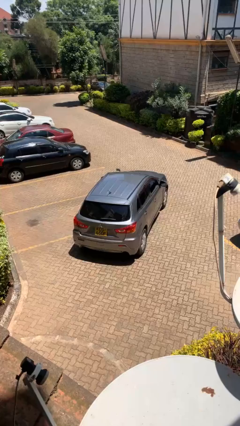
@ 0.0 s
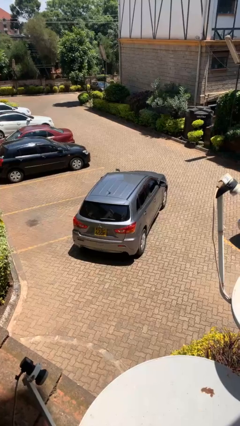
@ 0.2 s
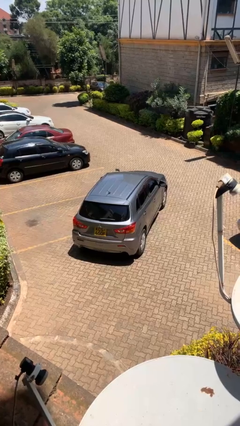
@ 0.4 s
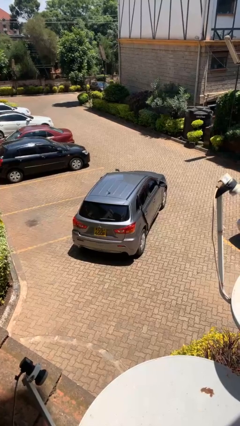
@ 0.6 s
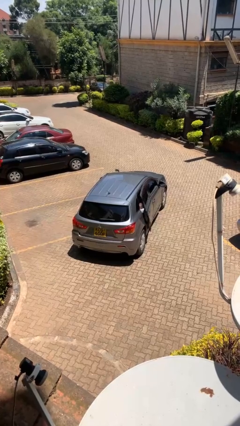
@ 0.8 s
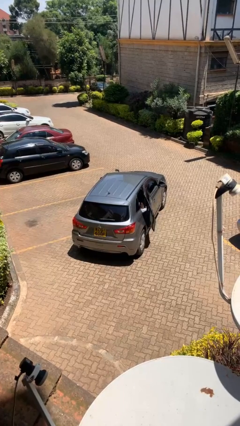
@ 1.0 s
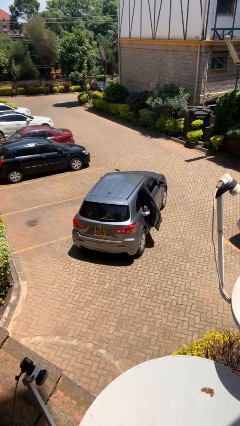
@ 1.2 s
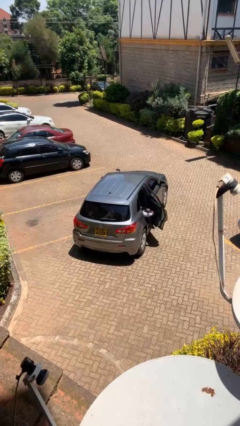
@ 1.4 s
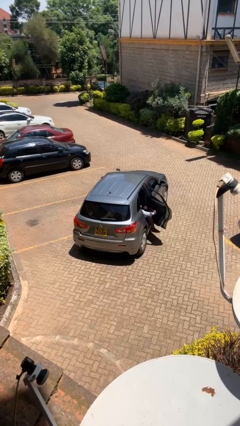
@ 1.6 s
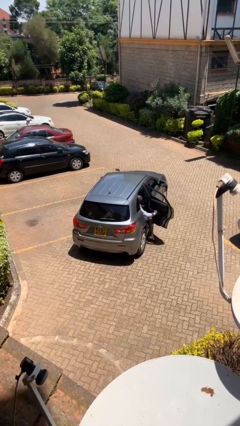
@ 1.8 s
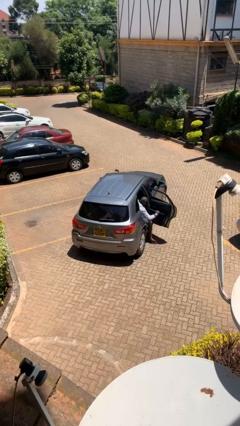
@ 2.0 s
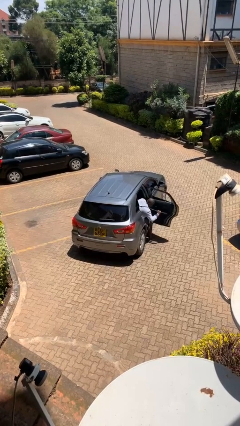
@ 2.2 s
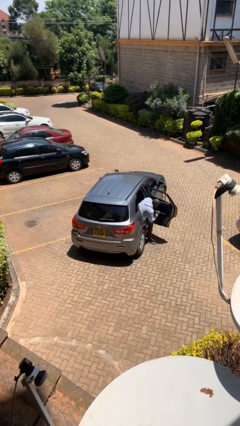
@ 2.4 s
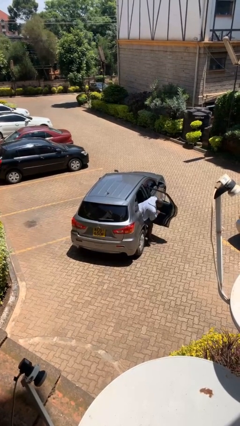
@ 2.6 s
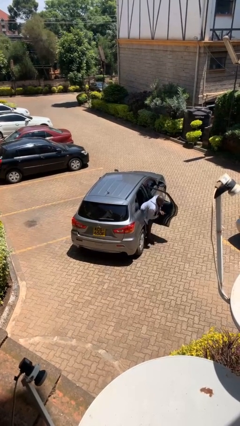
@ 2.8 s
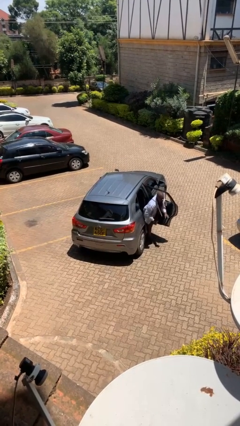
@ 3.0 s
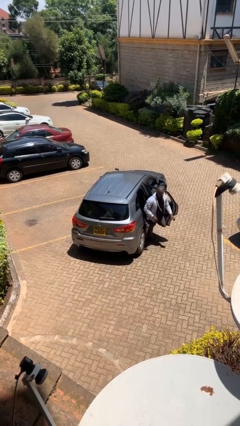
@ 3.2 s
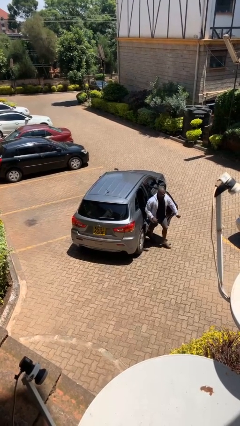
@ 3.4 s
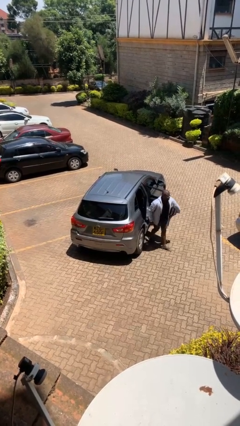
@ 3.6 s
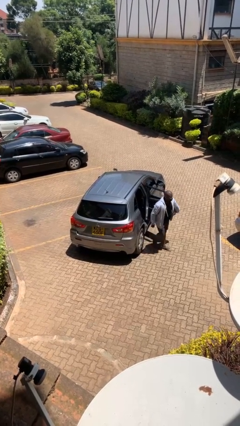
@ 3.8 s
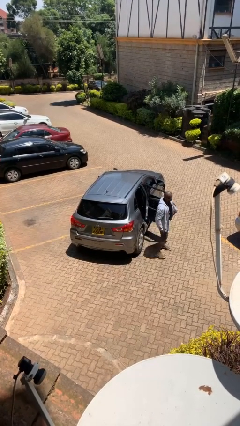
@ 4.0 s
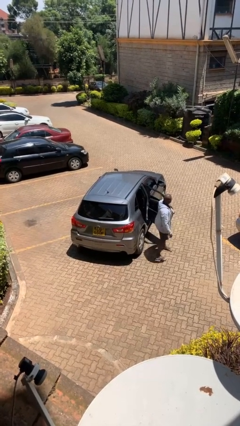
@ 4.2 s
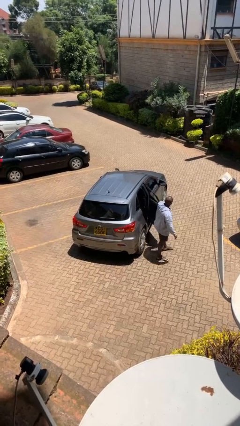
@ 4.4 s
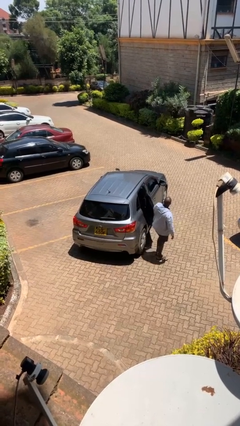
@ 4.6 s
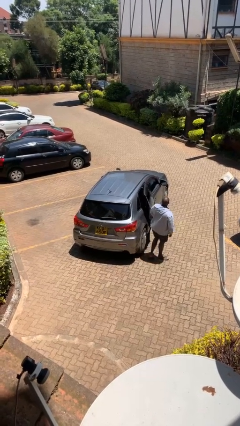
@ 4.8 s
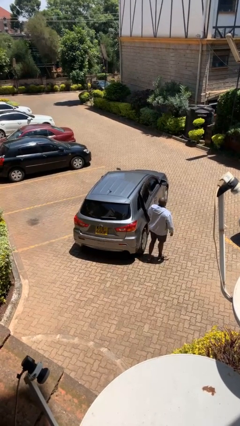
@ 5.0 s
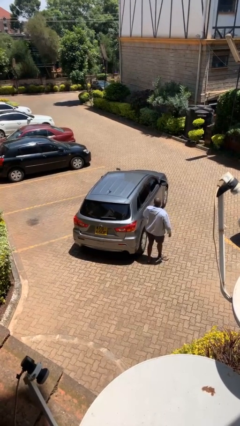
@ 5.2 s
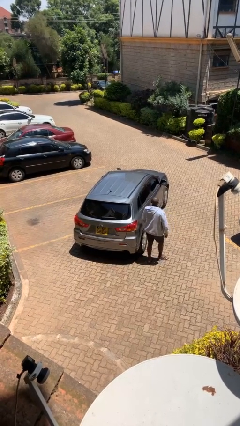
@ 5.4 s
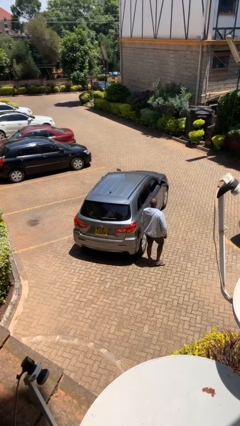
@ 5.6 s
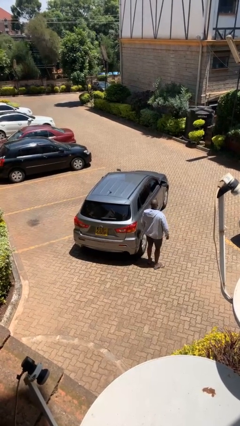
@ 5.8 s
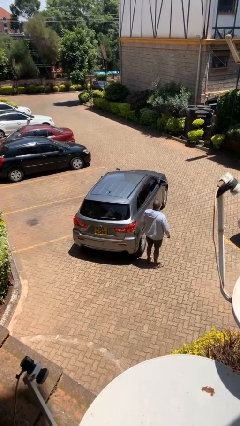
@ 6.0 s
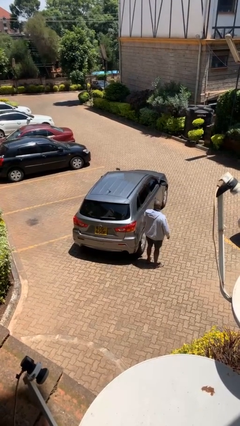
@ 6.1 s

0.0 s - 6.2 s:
car drops off person

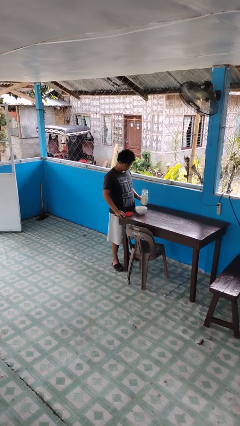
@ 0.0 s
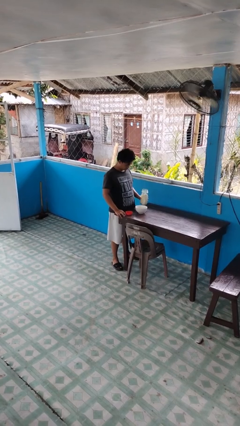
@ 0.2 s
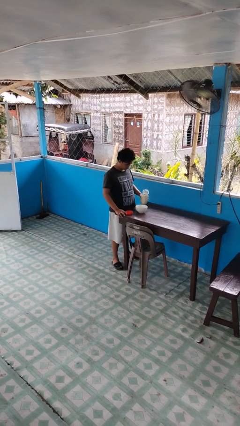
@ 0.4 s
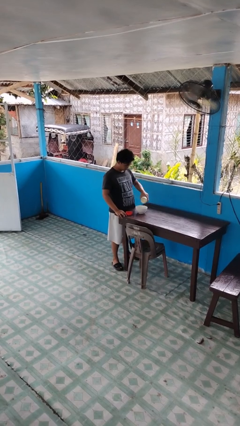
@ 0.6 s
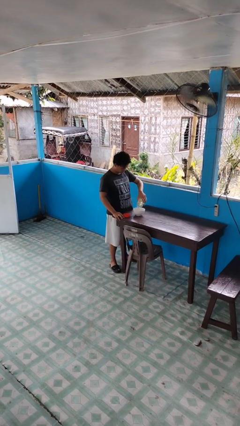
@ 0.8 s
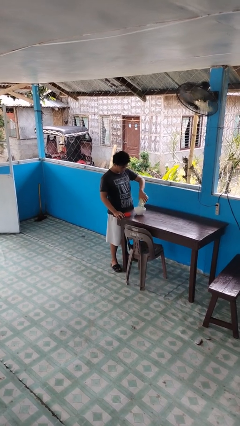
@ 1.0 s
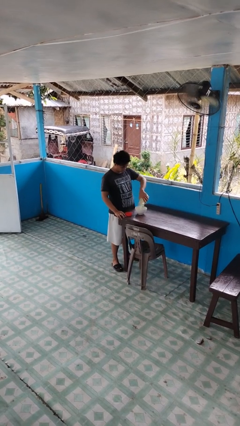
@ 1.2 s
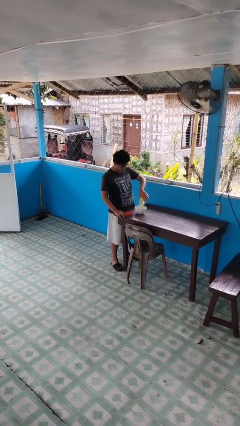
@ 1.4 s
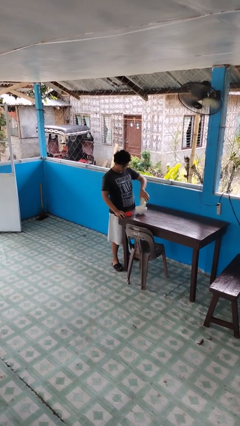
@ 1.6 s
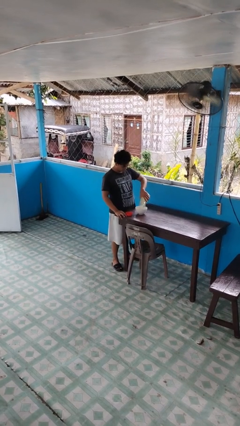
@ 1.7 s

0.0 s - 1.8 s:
person pours into bowl

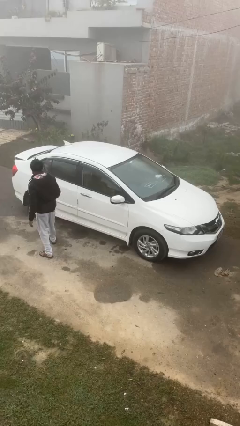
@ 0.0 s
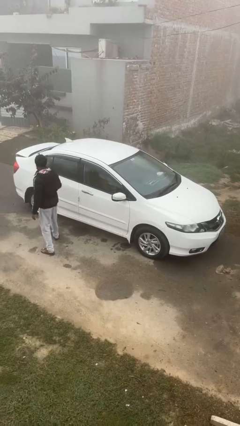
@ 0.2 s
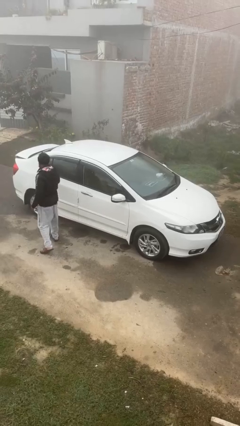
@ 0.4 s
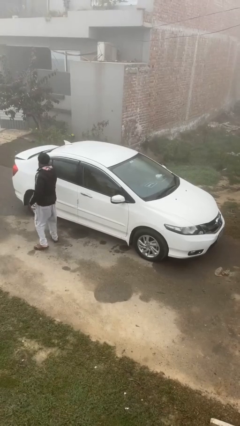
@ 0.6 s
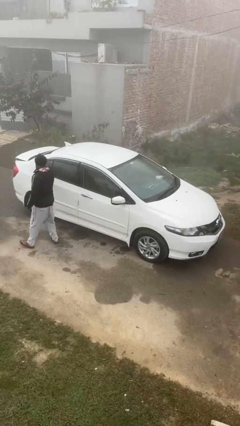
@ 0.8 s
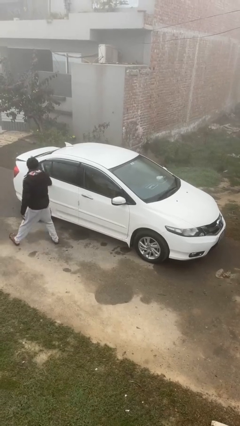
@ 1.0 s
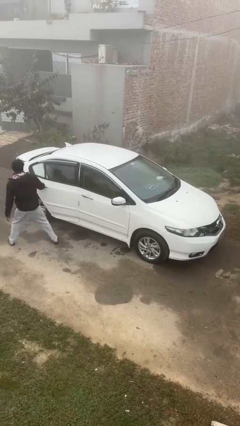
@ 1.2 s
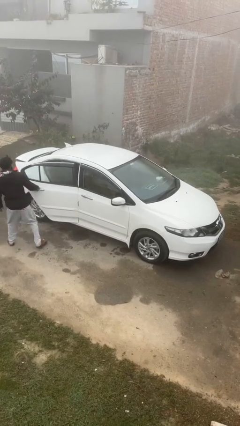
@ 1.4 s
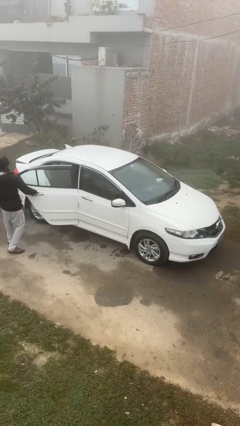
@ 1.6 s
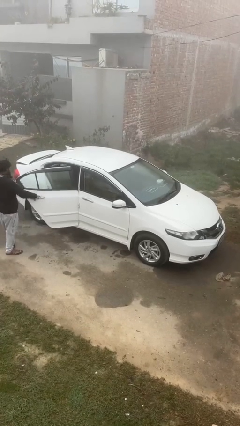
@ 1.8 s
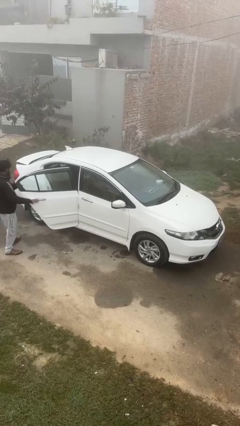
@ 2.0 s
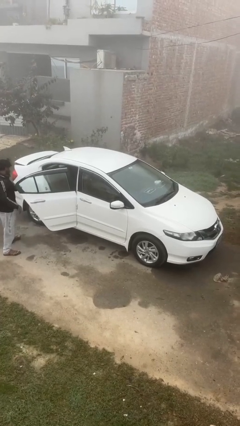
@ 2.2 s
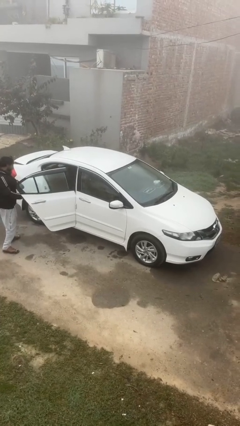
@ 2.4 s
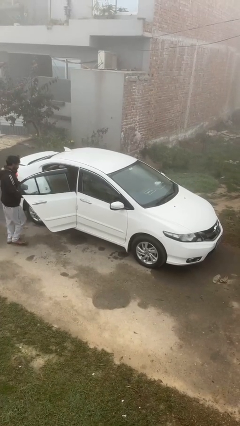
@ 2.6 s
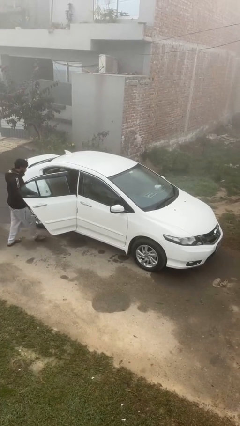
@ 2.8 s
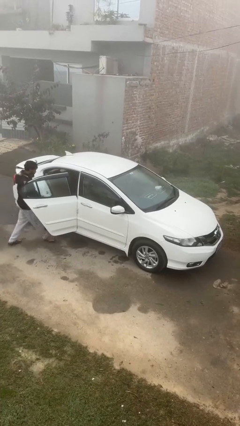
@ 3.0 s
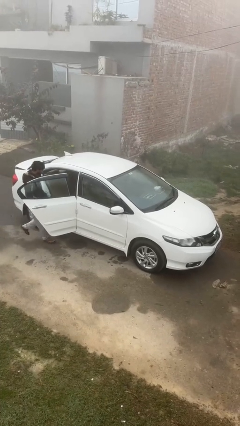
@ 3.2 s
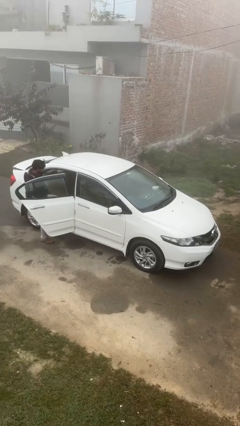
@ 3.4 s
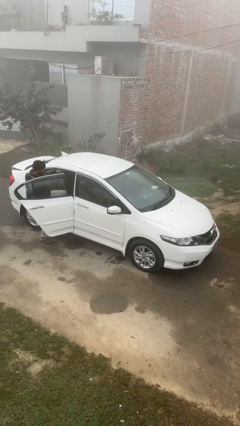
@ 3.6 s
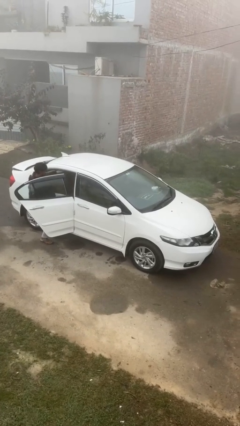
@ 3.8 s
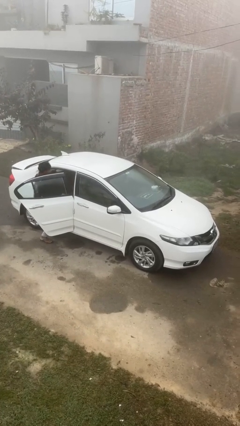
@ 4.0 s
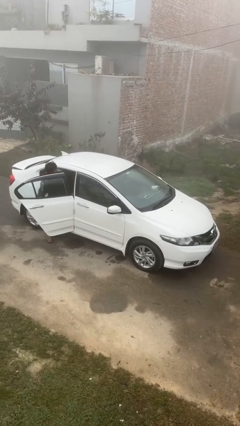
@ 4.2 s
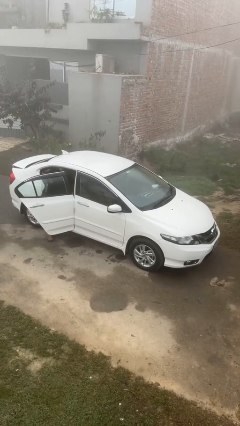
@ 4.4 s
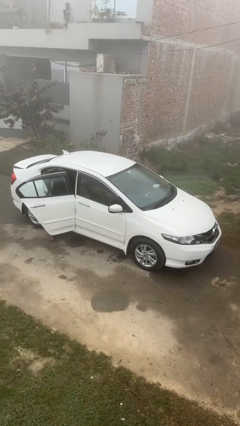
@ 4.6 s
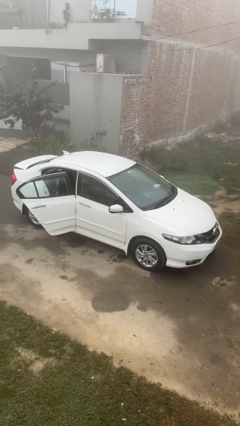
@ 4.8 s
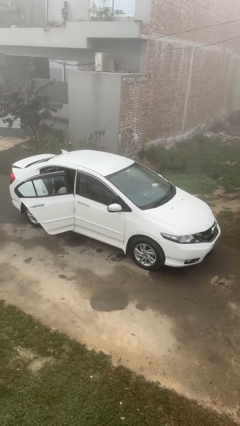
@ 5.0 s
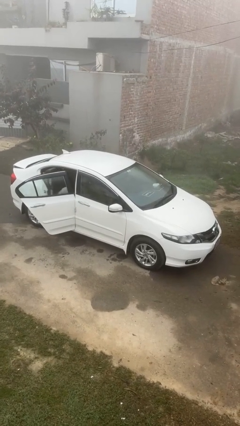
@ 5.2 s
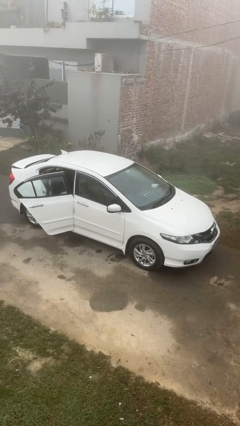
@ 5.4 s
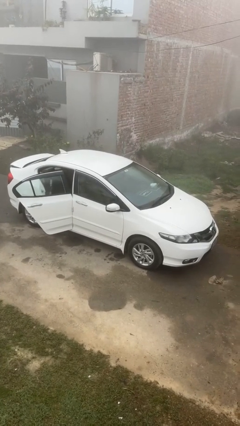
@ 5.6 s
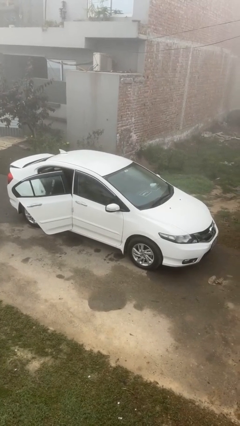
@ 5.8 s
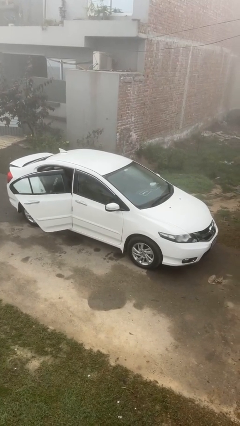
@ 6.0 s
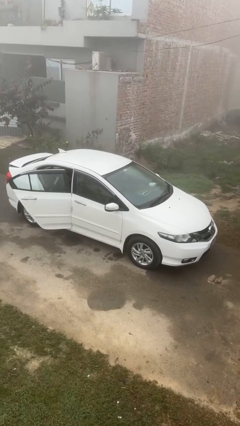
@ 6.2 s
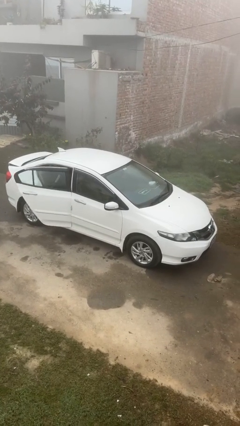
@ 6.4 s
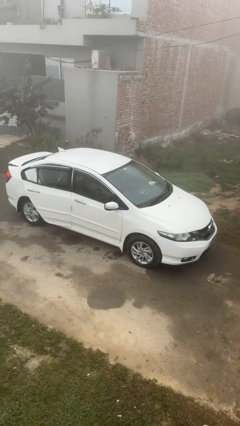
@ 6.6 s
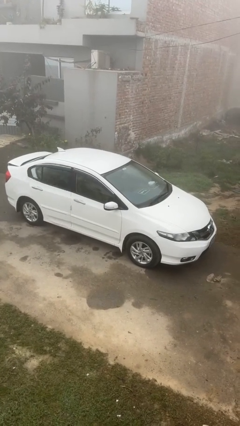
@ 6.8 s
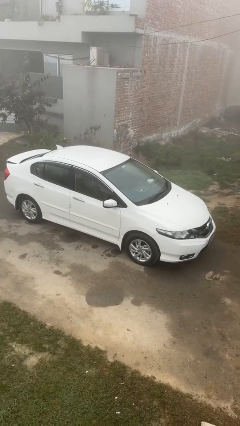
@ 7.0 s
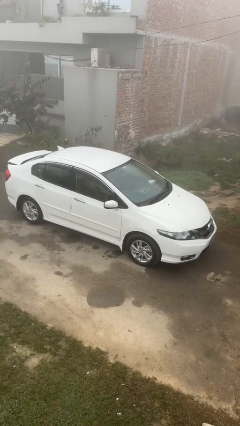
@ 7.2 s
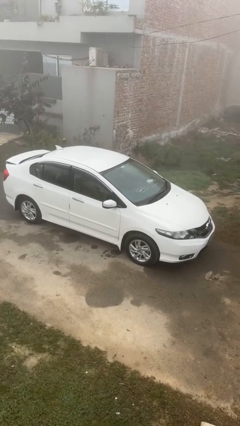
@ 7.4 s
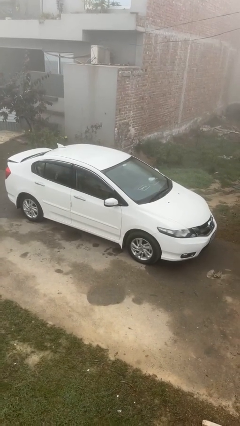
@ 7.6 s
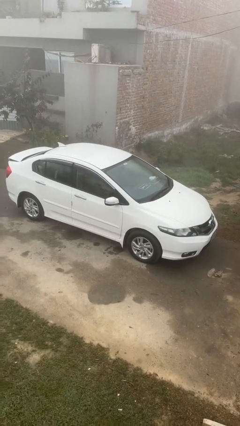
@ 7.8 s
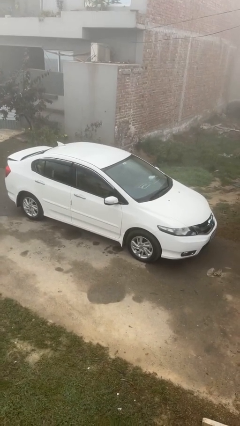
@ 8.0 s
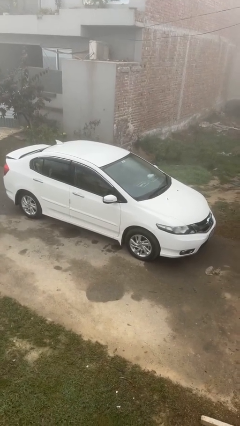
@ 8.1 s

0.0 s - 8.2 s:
car picks up person

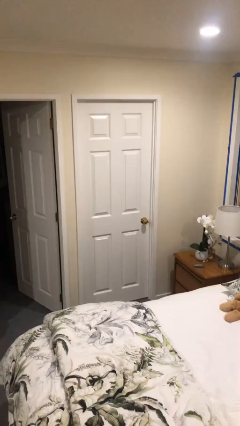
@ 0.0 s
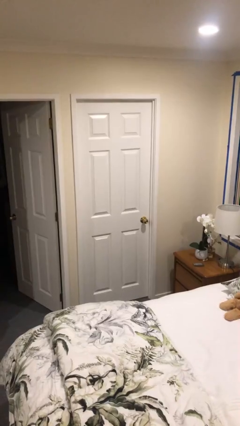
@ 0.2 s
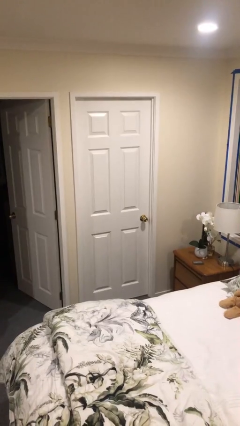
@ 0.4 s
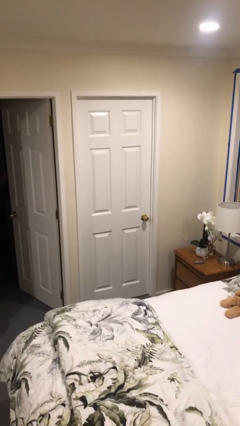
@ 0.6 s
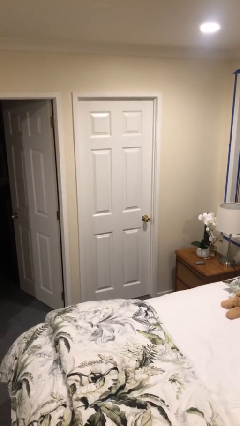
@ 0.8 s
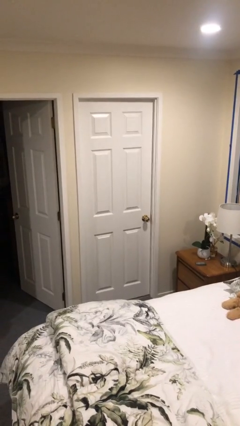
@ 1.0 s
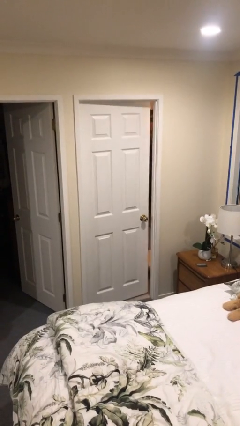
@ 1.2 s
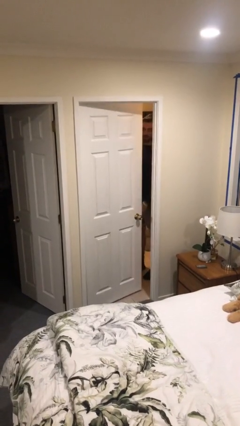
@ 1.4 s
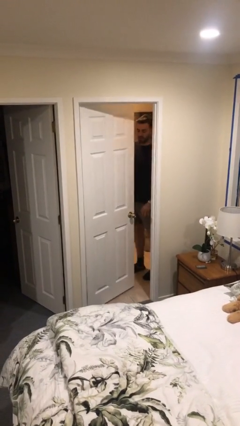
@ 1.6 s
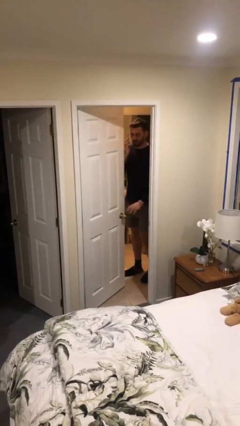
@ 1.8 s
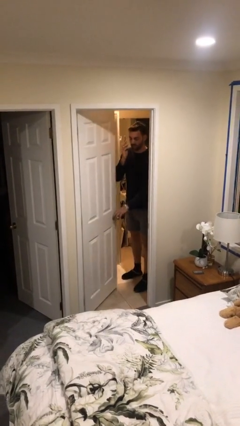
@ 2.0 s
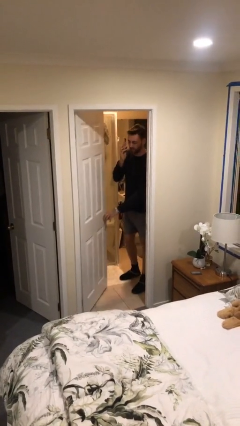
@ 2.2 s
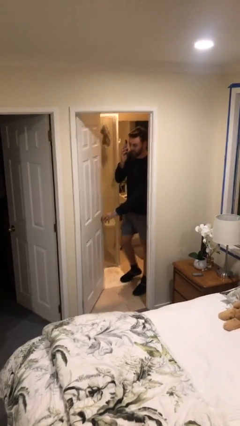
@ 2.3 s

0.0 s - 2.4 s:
person opens facility door
